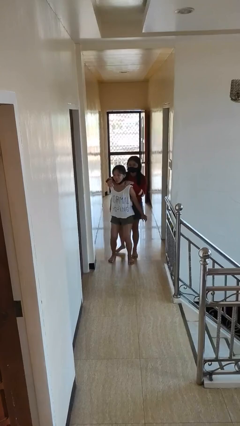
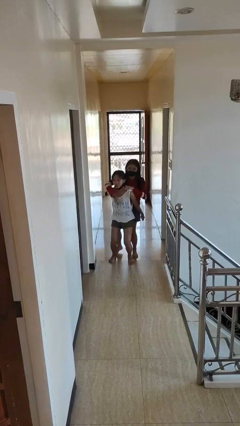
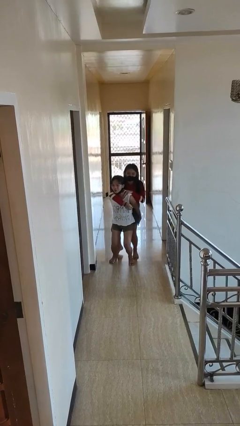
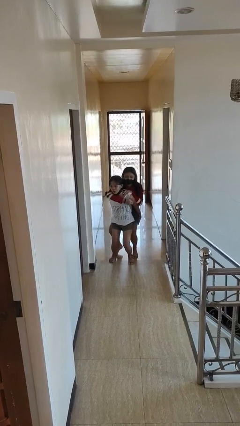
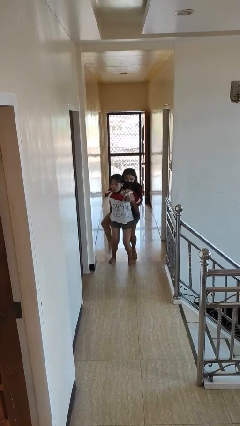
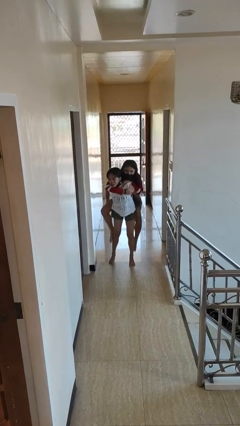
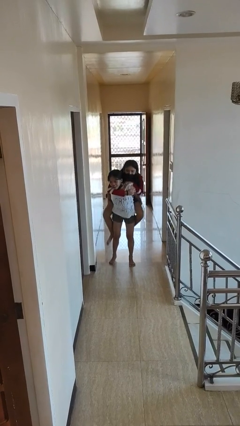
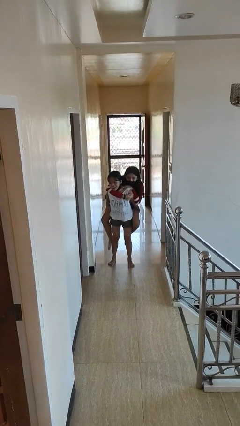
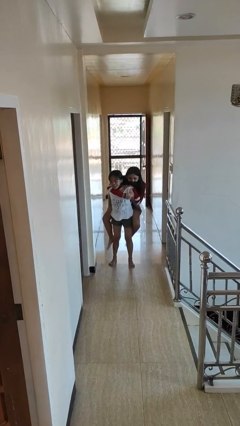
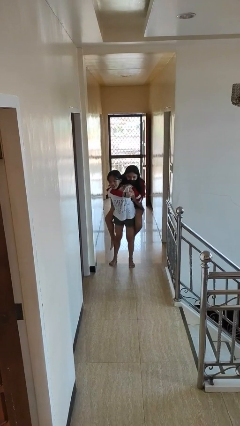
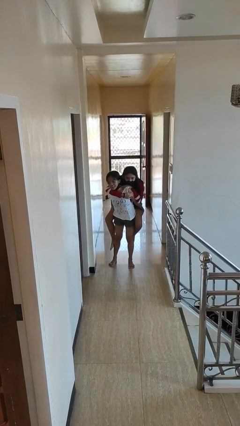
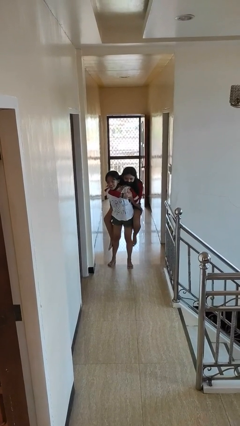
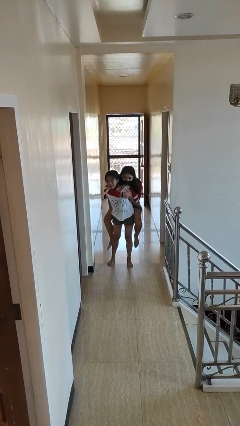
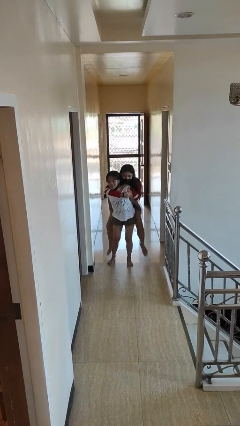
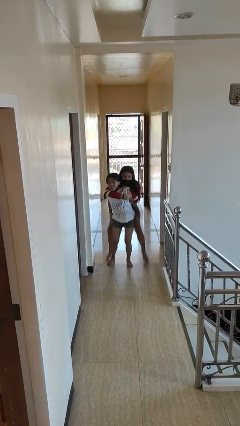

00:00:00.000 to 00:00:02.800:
person carries person over shoulder

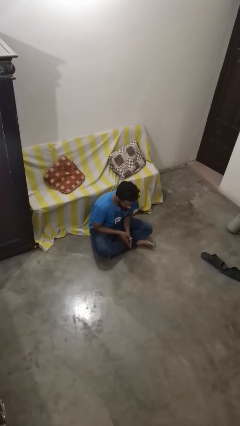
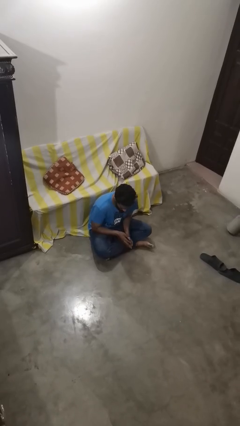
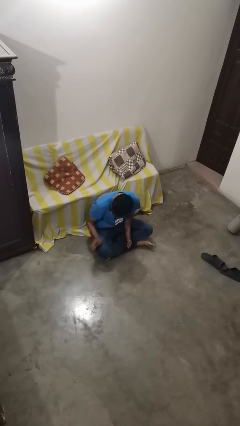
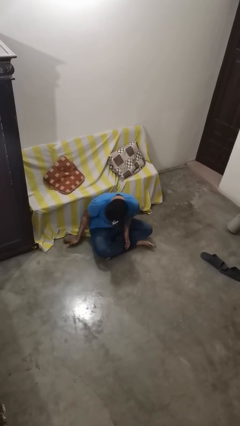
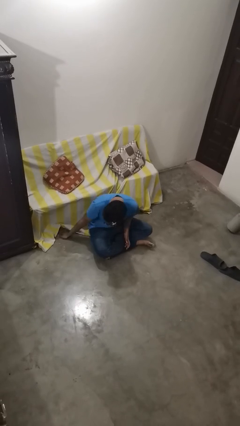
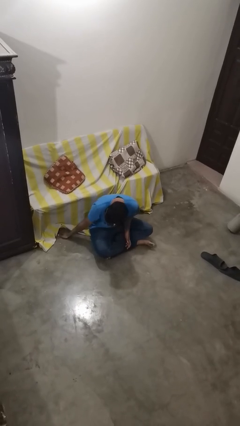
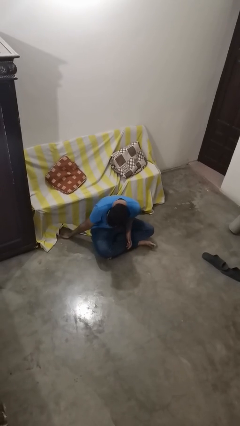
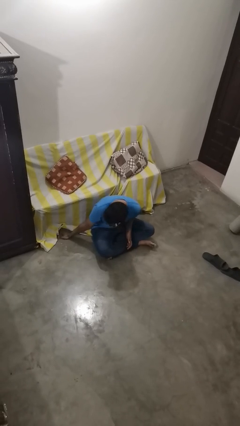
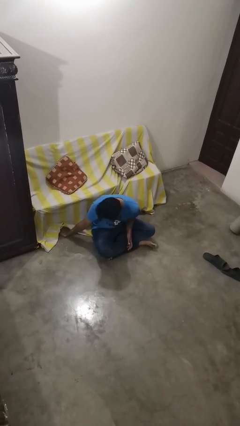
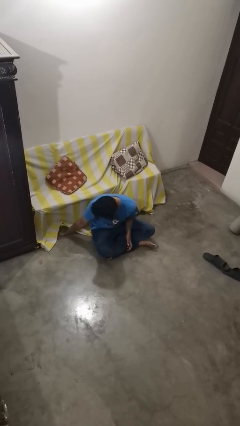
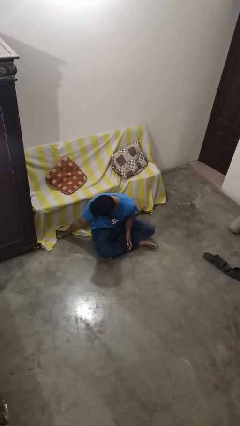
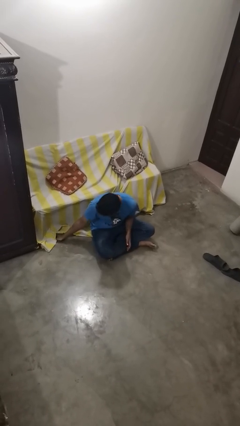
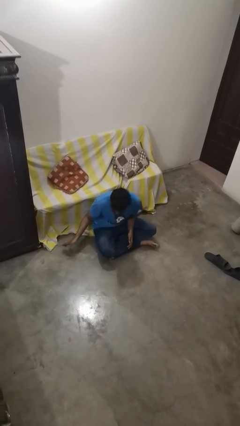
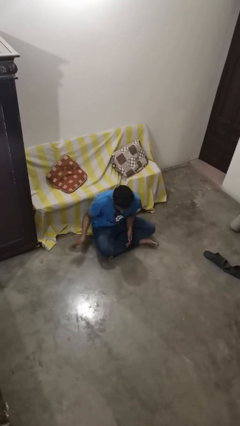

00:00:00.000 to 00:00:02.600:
person searches under couch

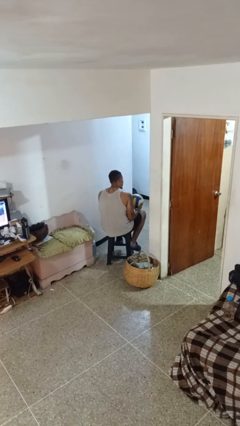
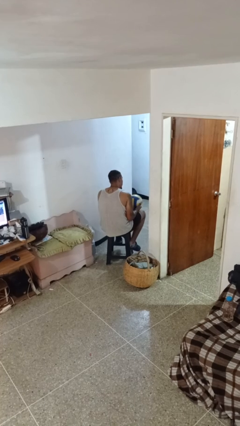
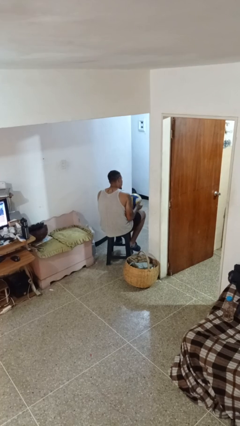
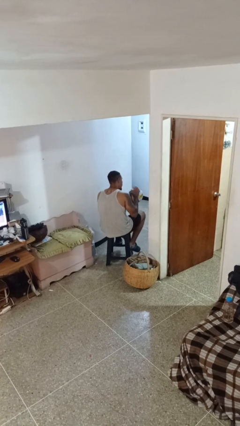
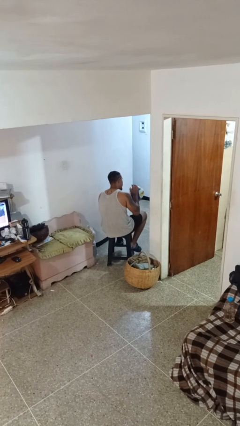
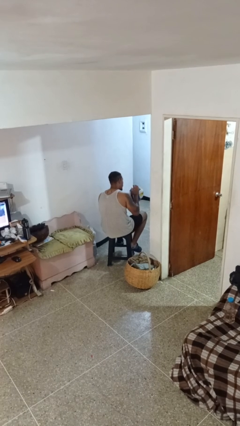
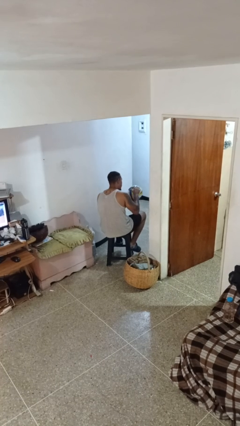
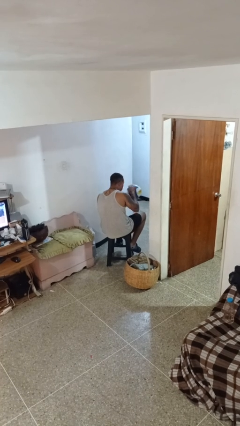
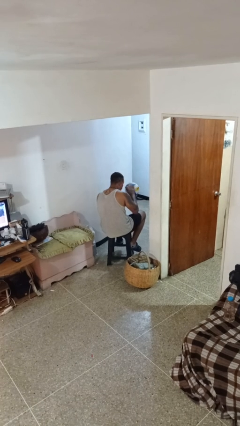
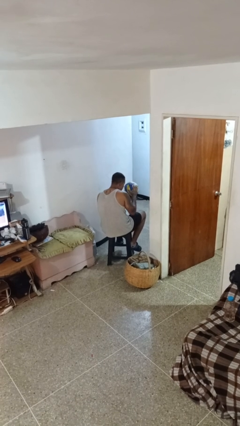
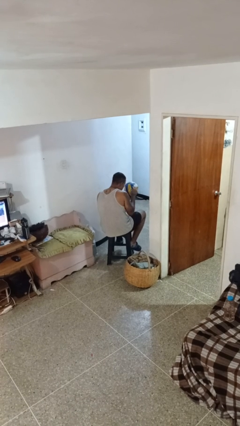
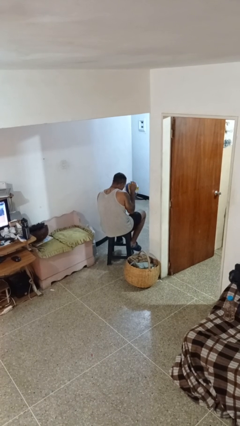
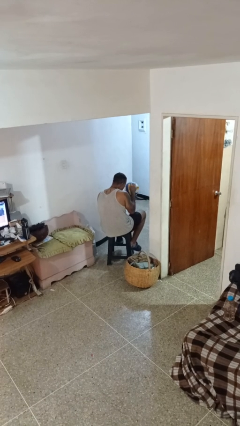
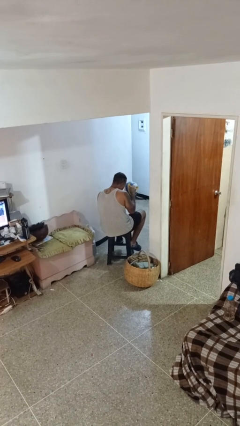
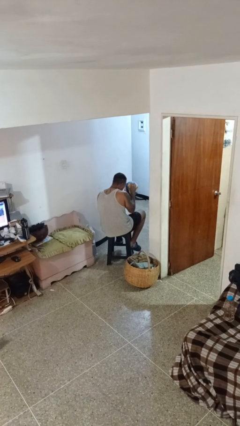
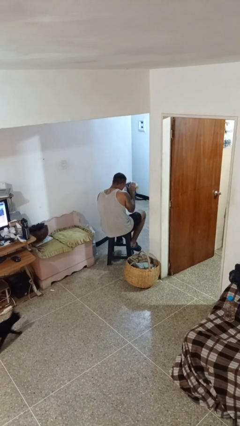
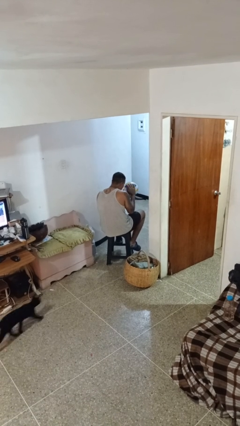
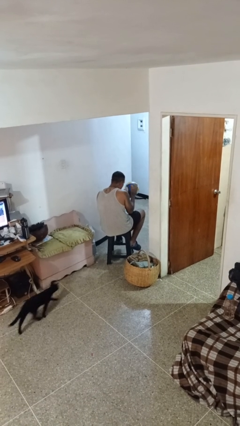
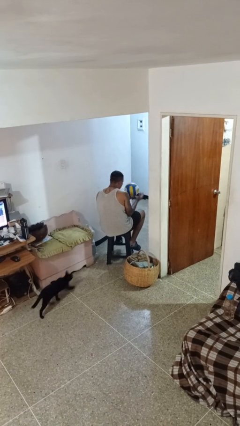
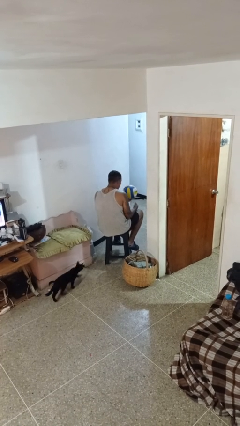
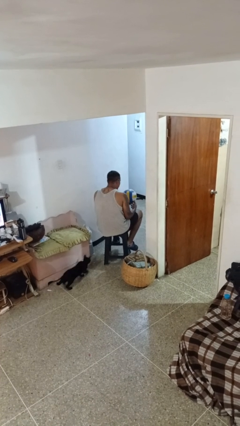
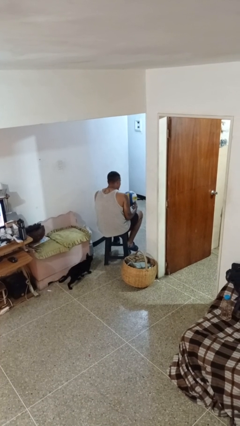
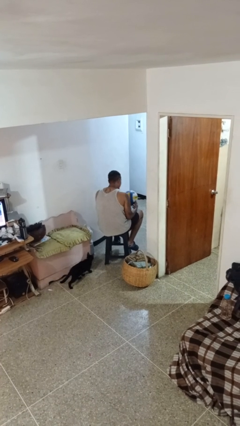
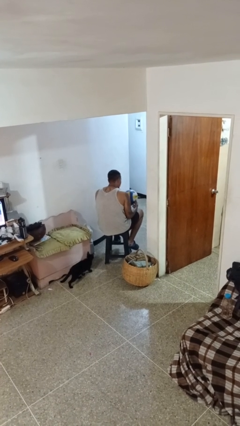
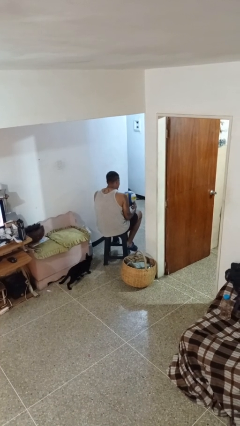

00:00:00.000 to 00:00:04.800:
person taps object with finger

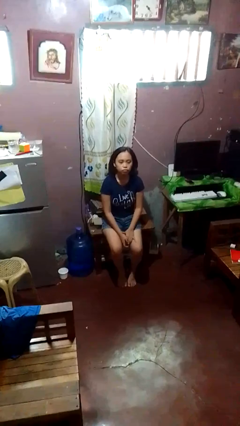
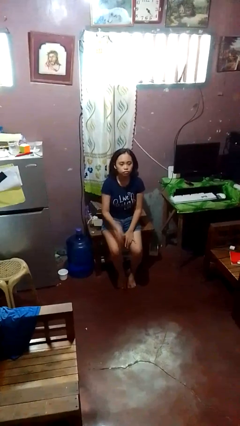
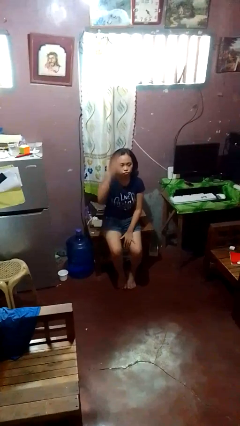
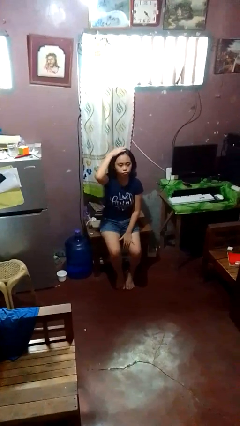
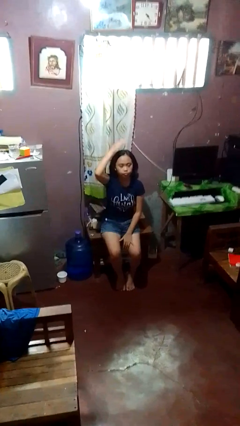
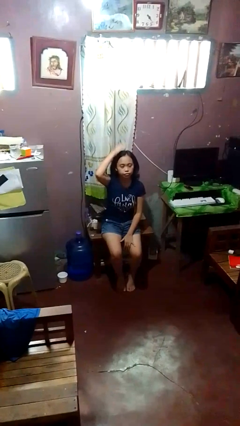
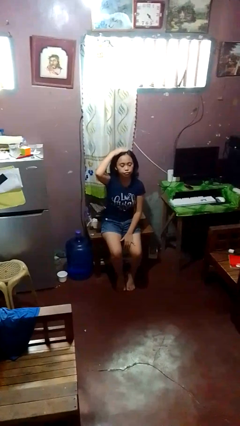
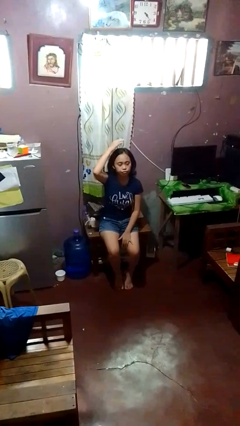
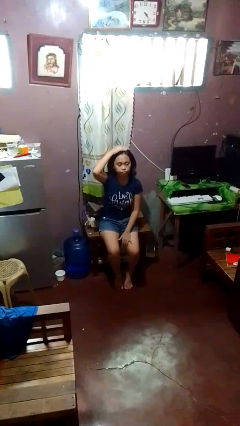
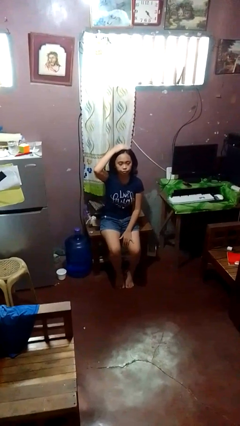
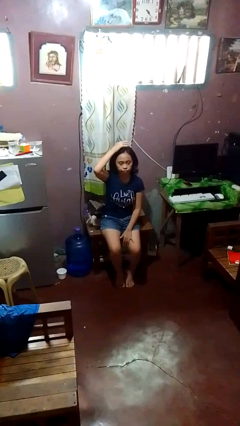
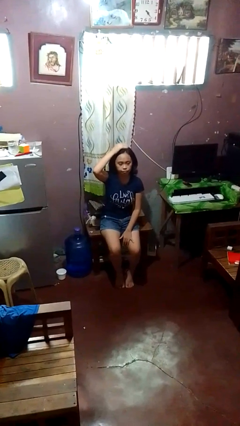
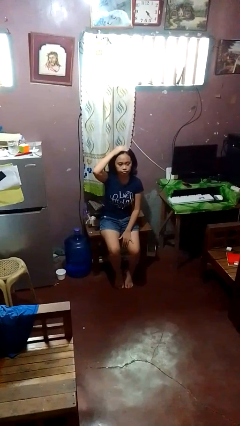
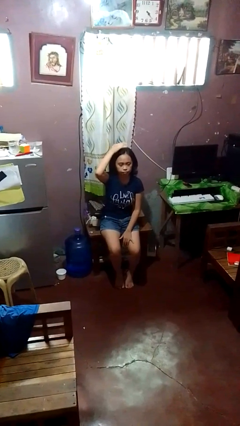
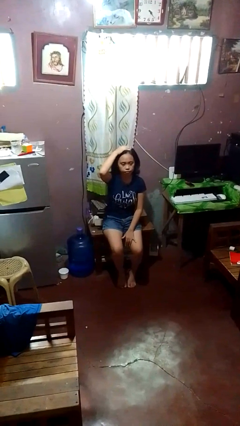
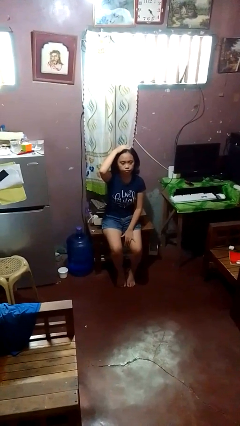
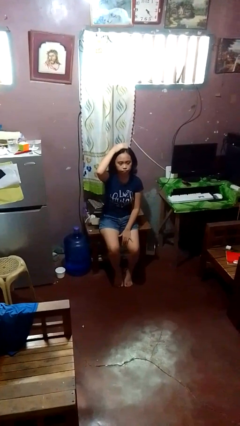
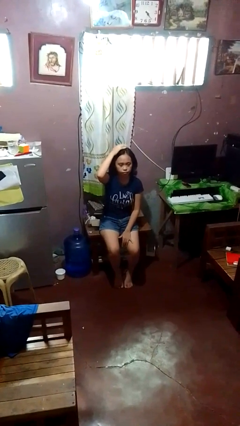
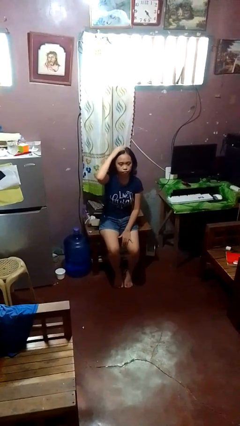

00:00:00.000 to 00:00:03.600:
person pats head

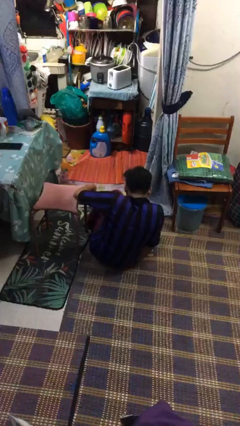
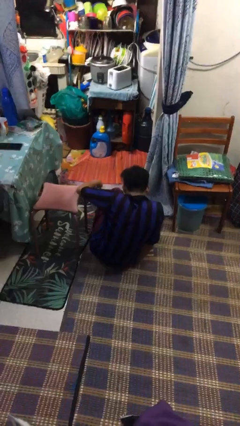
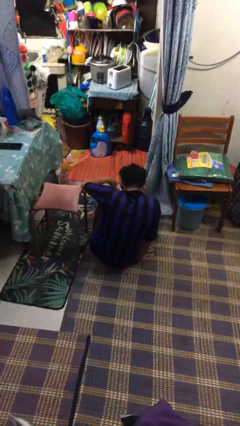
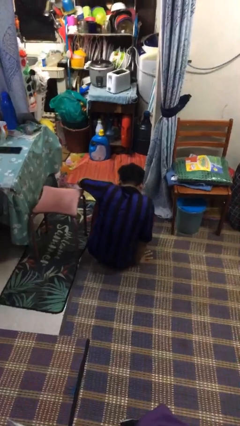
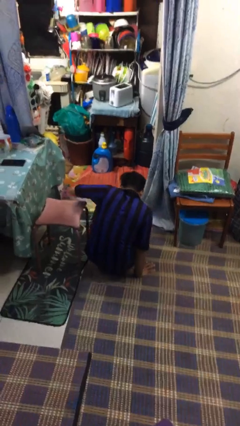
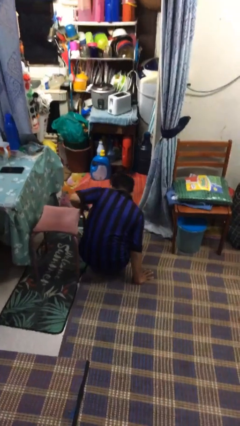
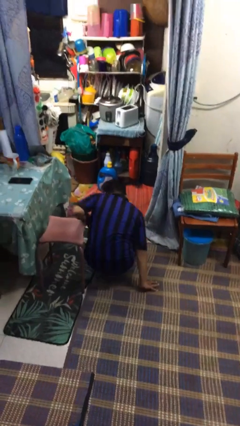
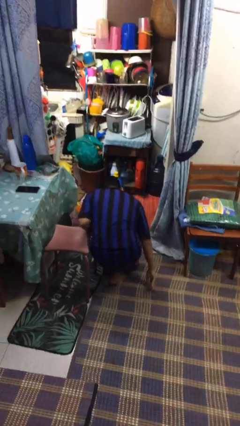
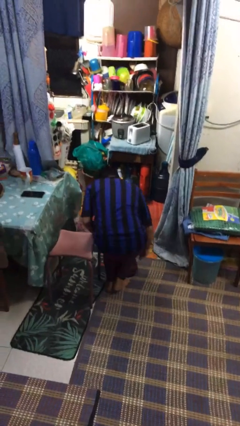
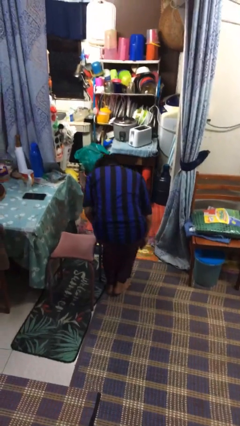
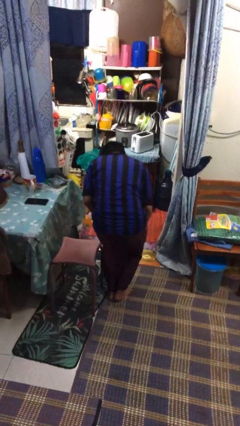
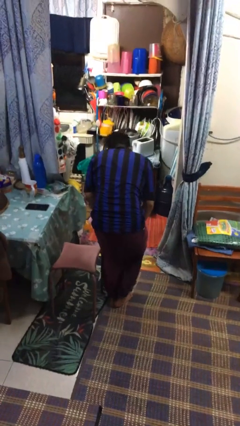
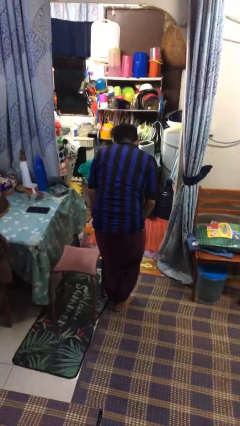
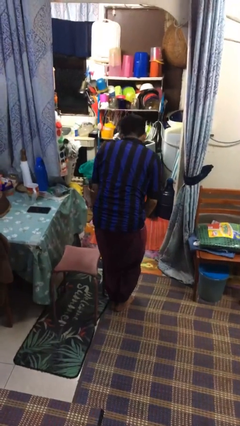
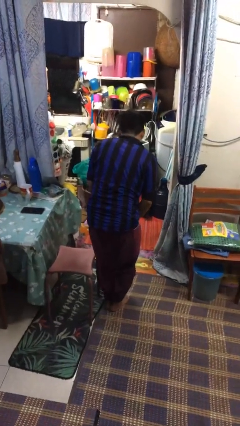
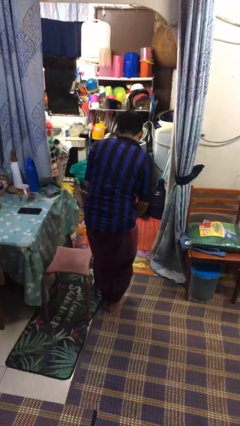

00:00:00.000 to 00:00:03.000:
person stands up from floor

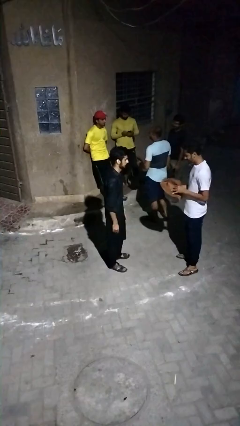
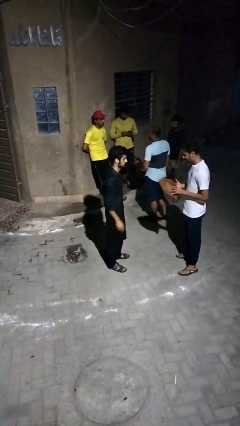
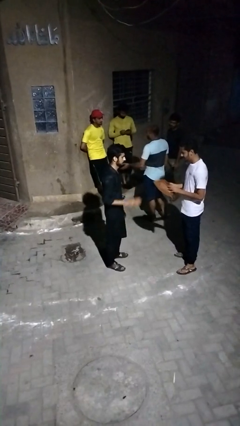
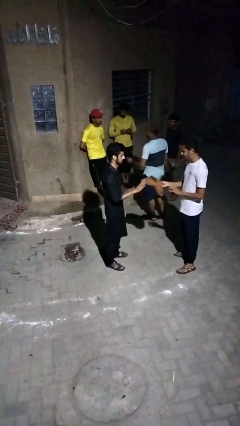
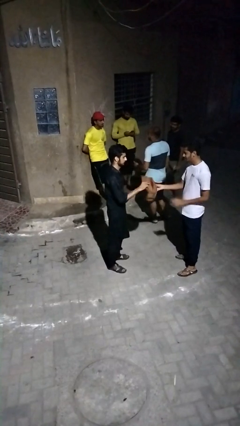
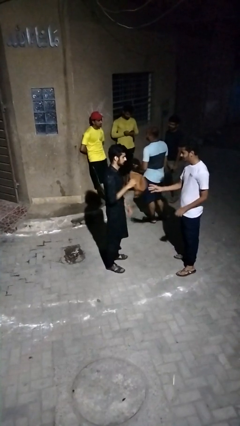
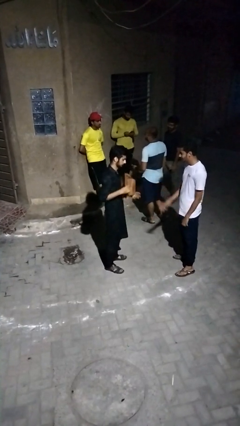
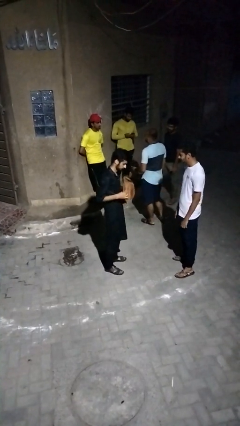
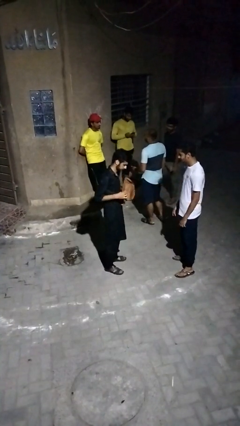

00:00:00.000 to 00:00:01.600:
person transfers object to person
